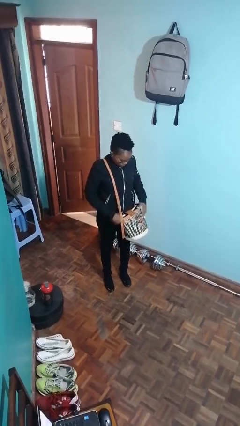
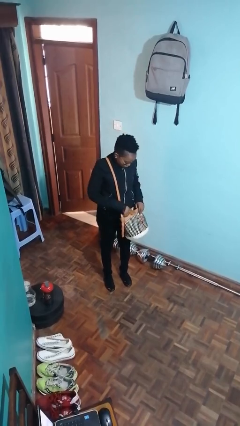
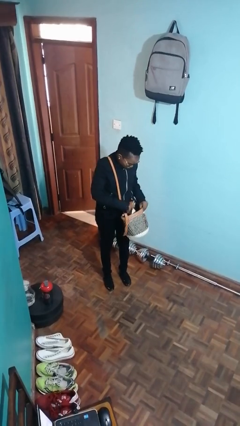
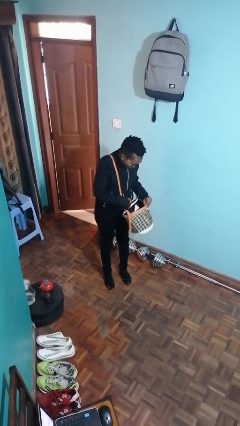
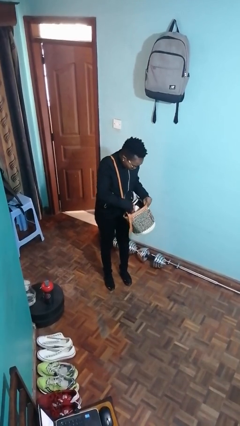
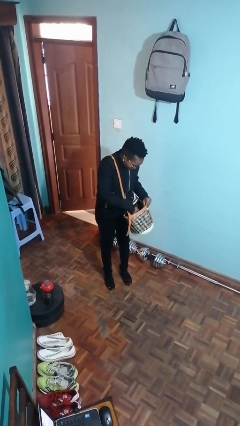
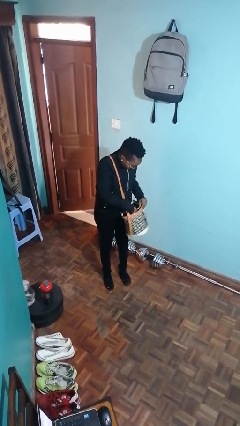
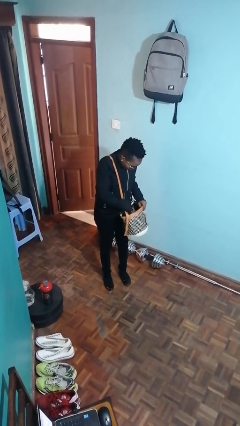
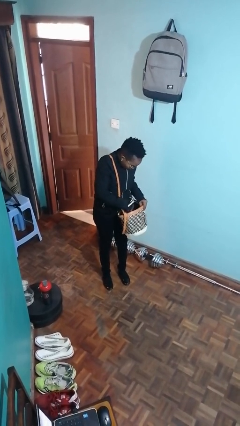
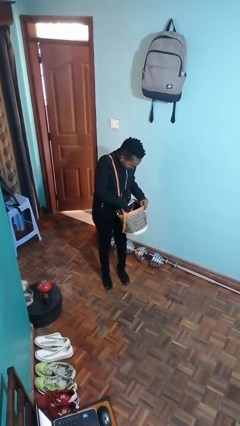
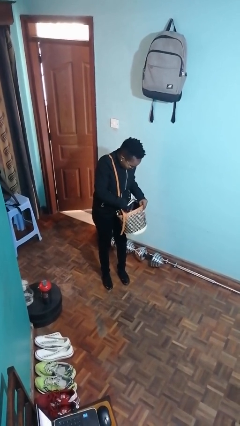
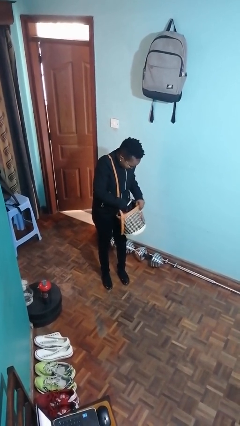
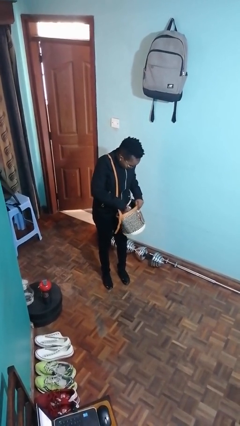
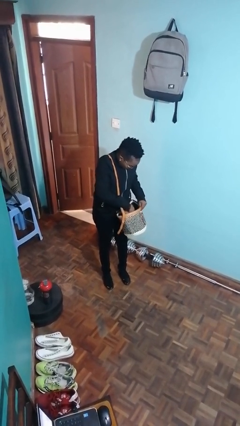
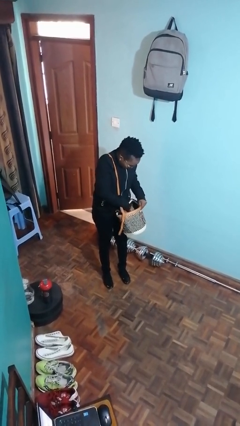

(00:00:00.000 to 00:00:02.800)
person searches in purse

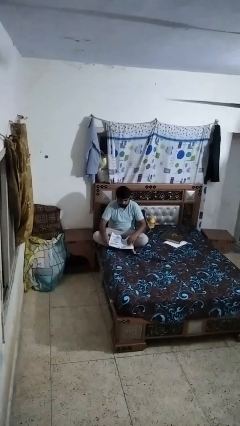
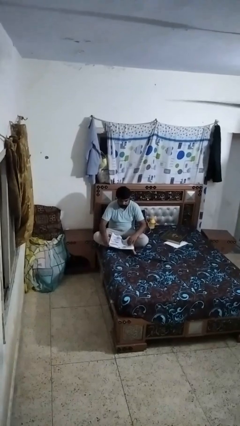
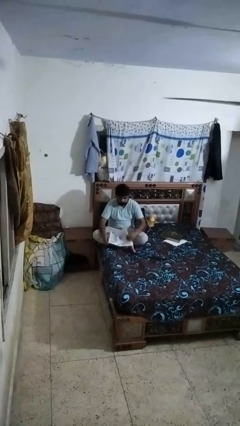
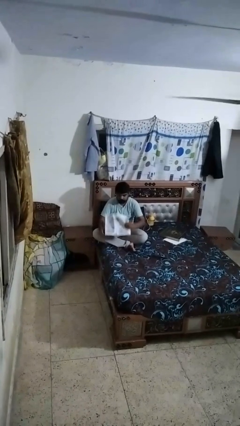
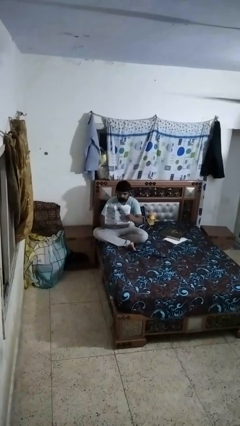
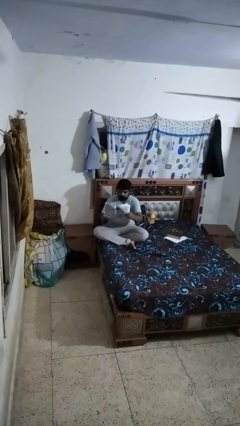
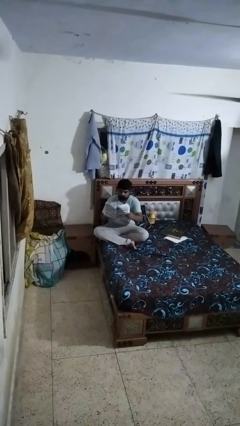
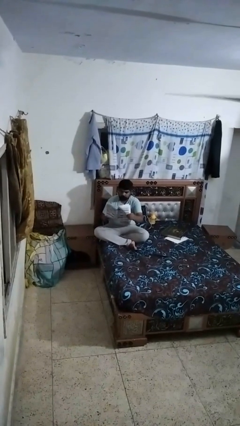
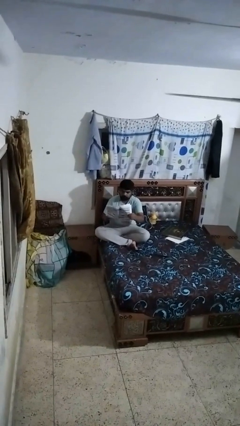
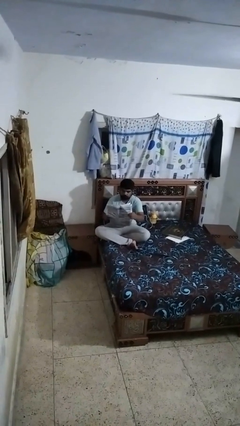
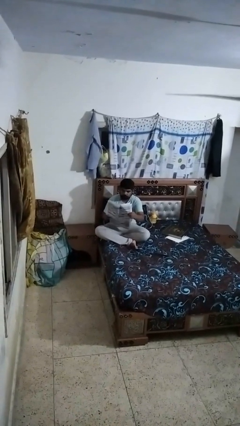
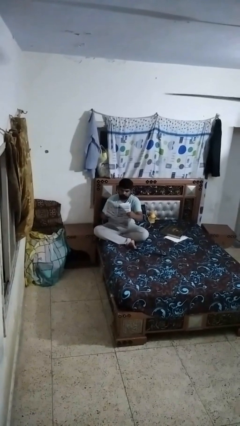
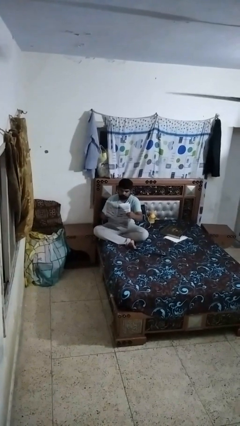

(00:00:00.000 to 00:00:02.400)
person reads newspaper

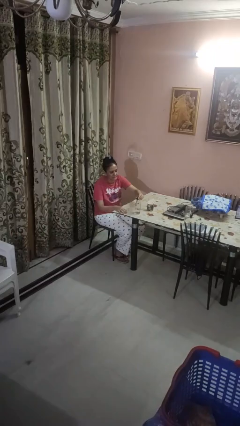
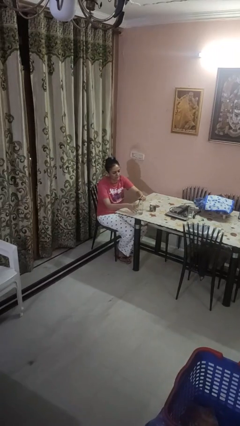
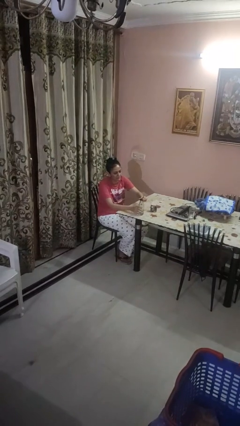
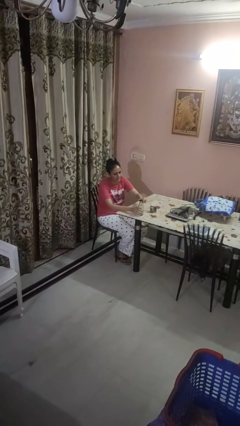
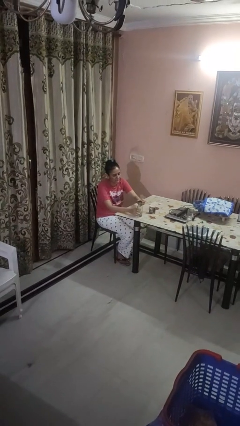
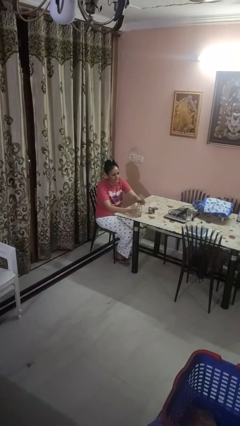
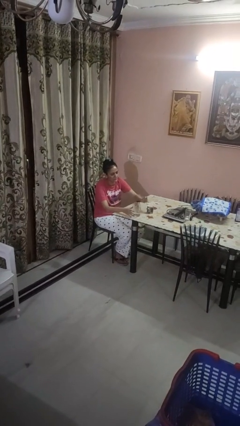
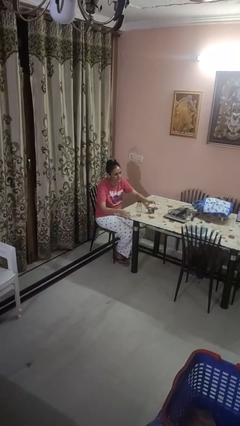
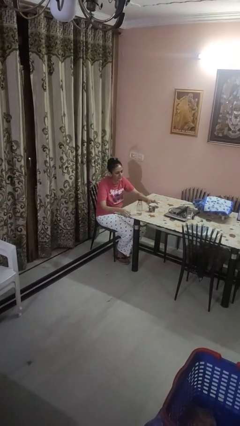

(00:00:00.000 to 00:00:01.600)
person screws lid to bottle

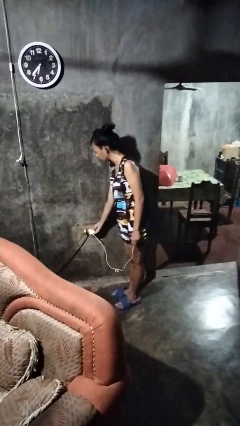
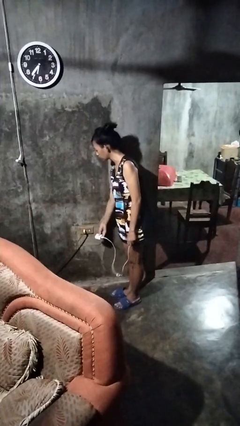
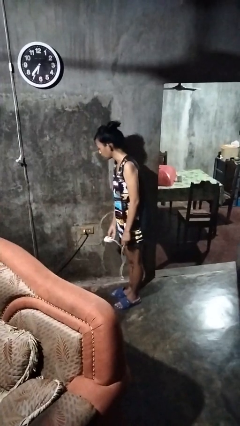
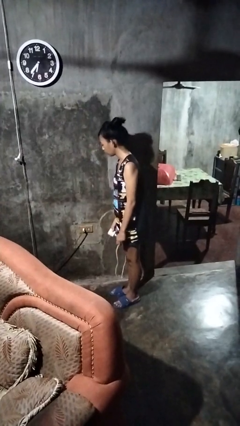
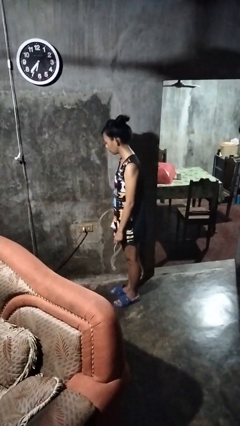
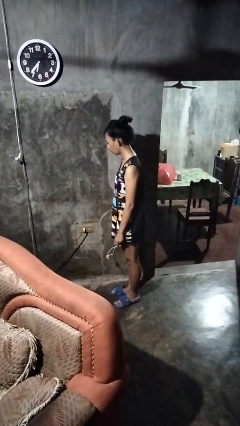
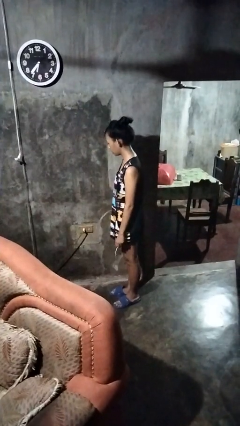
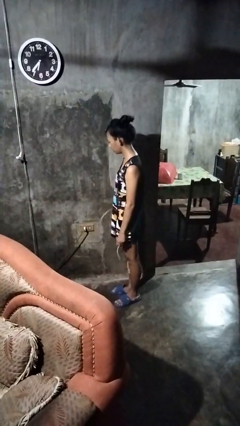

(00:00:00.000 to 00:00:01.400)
person unplugs from electrical socket

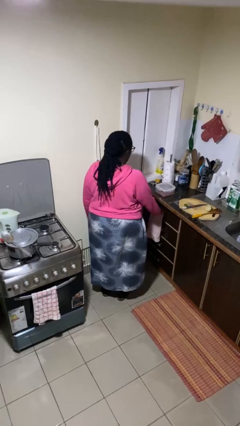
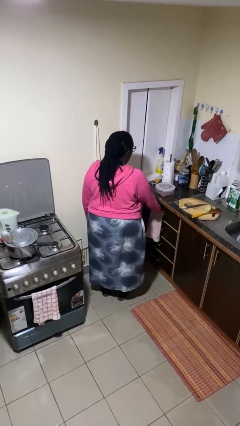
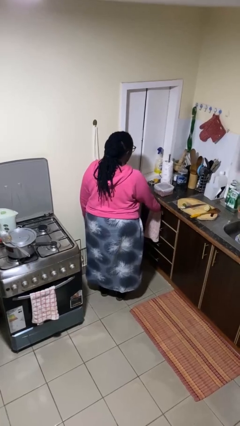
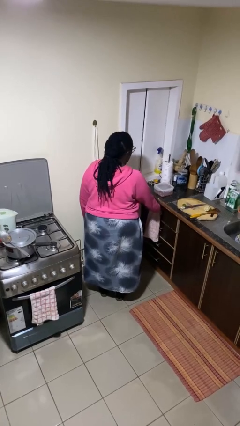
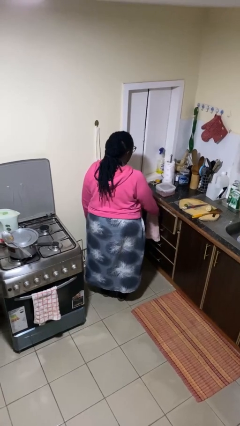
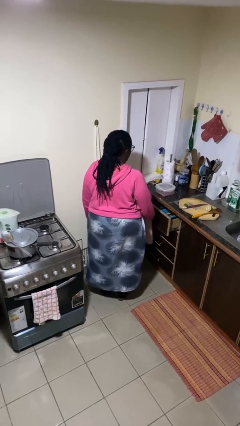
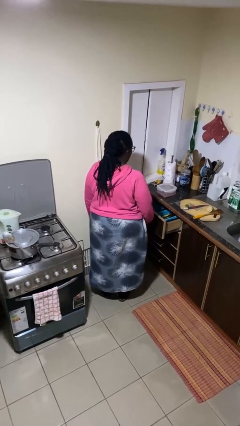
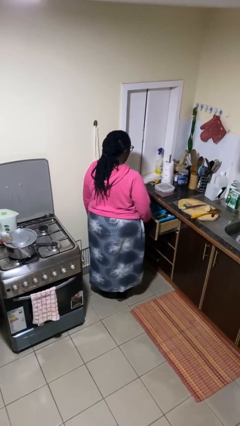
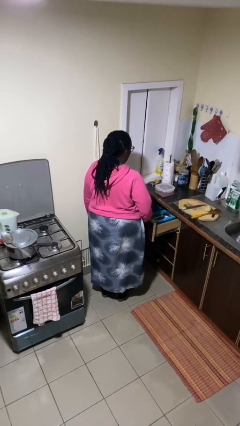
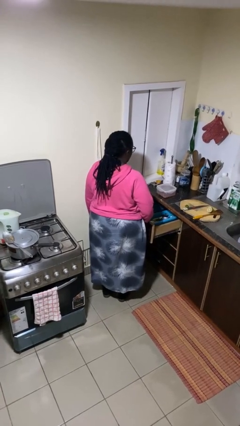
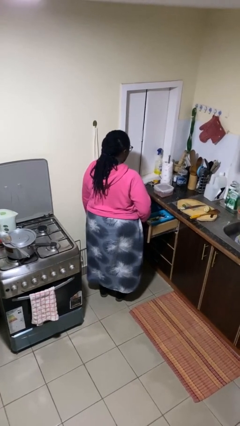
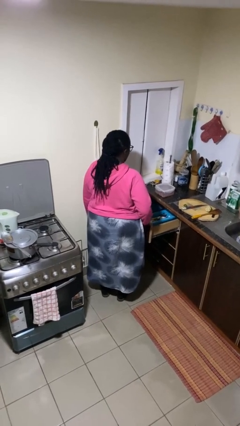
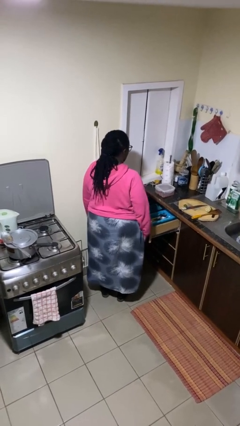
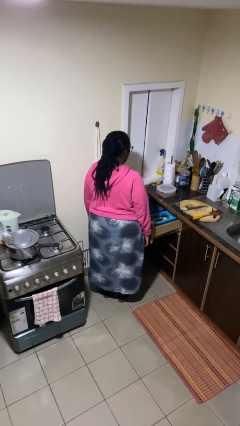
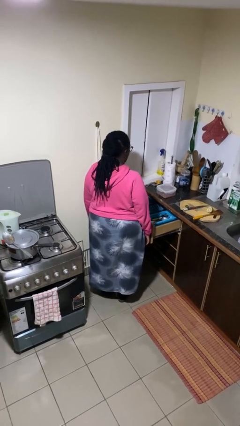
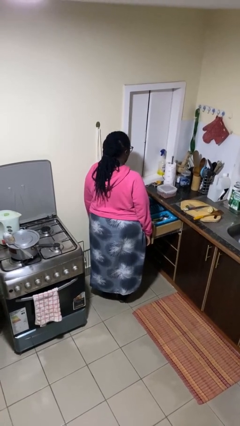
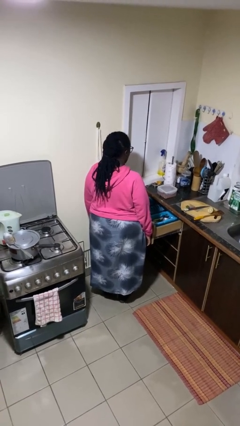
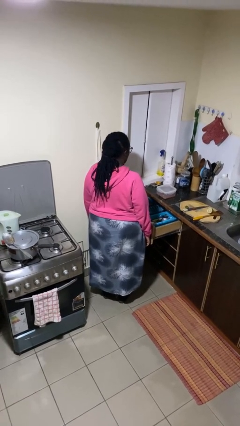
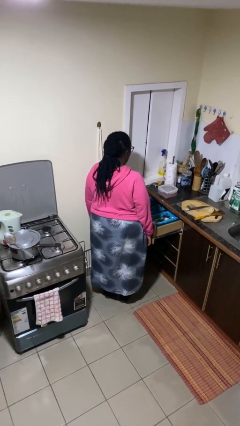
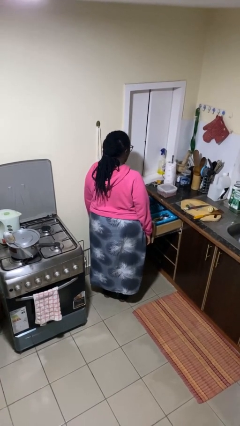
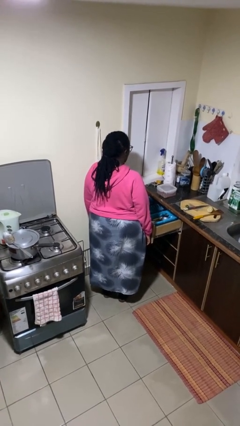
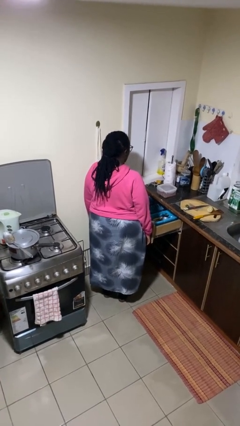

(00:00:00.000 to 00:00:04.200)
person opens kitchen drawer

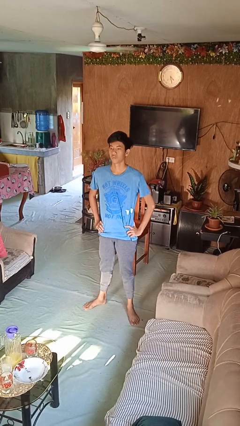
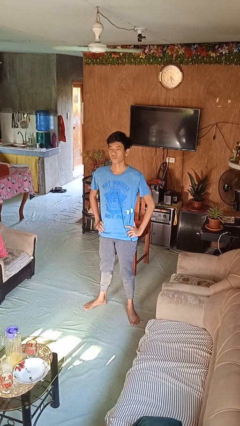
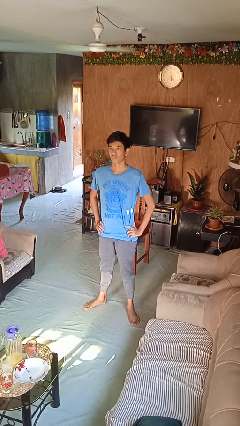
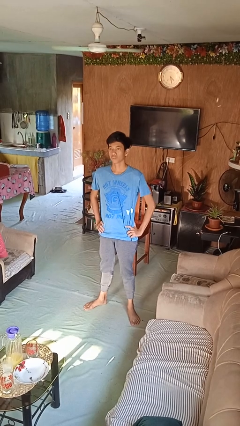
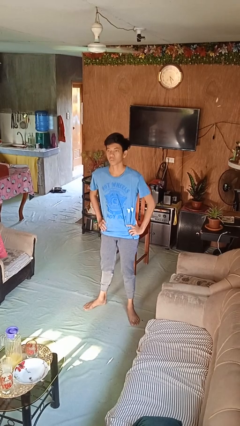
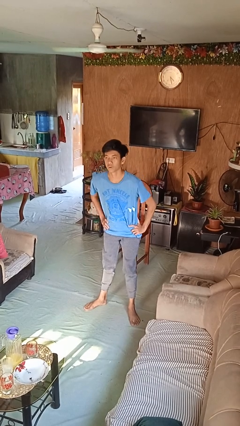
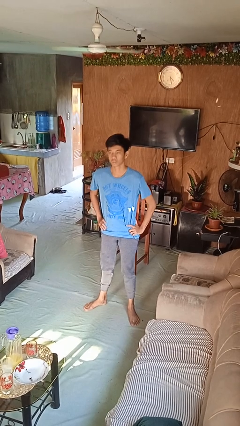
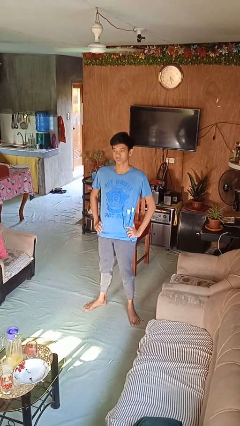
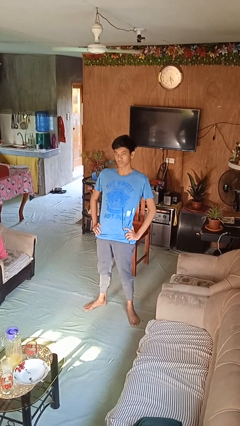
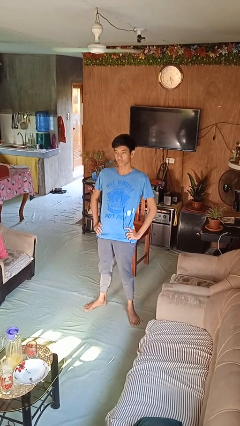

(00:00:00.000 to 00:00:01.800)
person wiggles hips

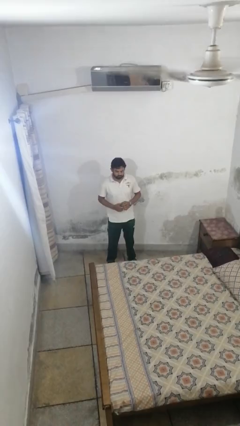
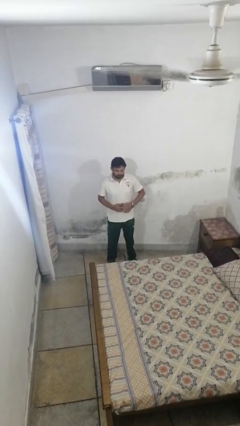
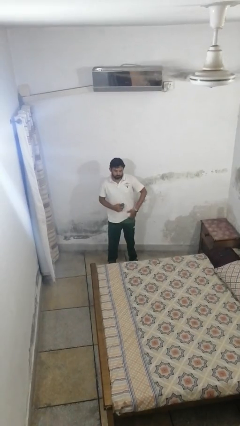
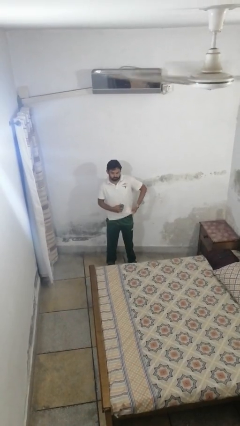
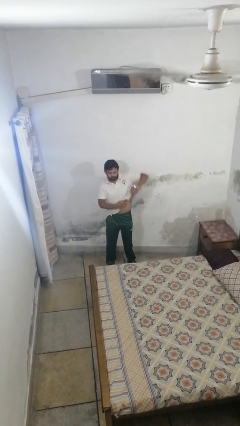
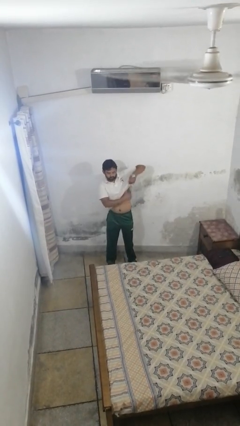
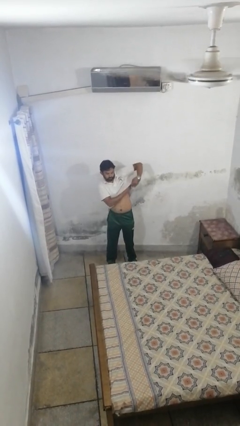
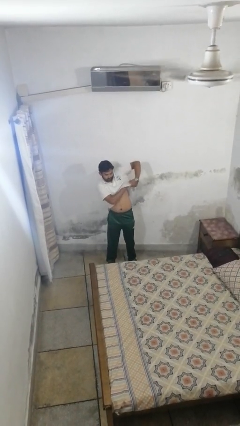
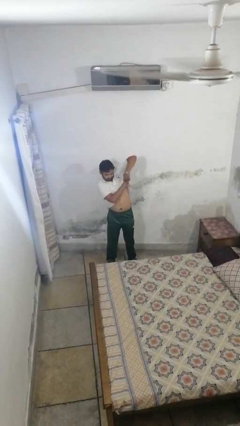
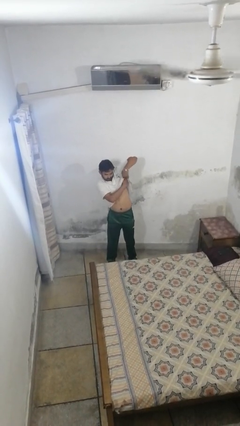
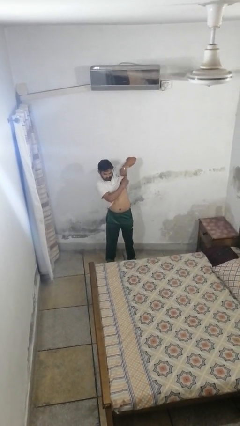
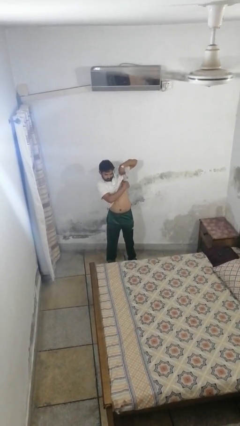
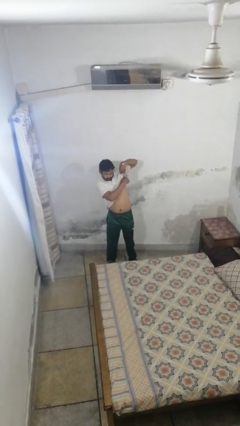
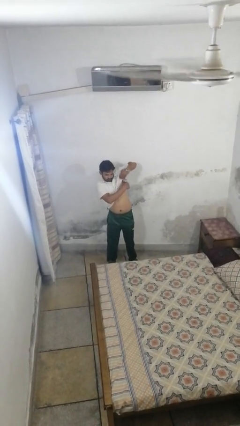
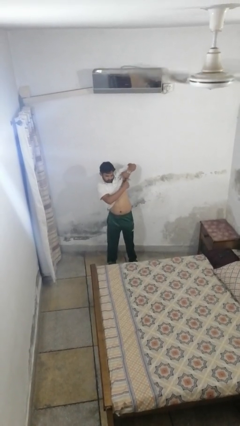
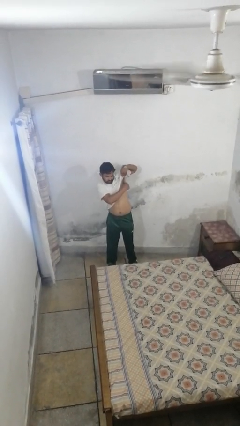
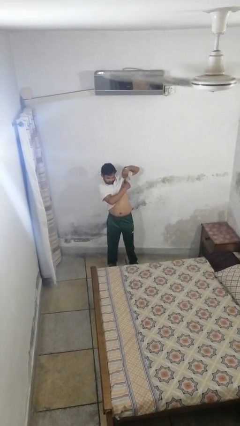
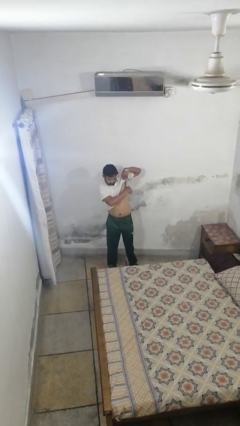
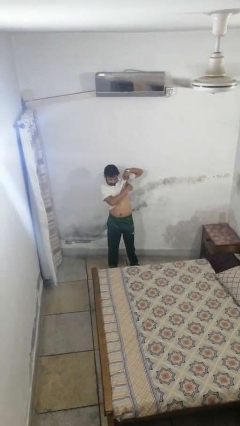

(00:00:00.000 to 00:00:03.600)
person applies deodorant
